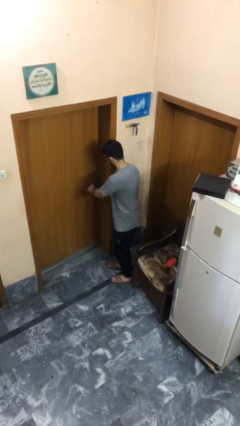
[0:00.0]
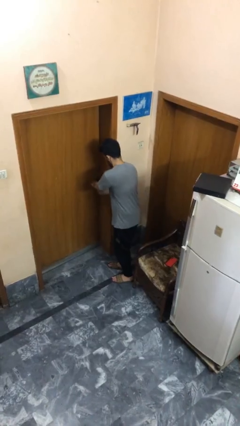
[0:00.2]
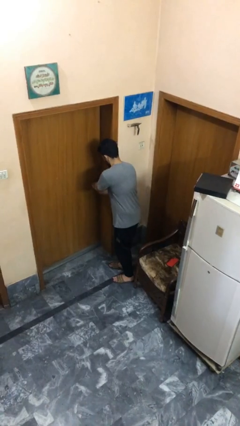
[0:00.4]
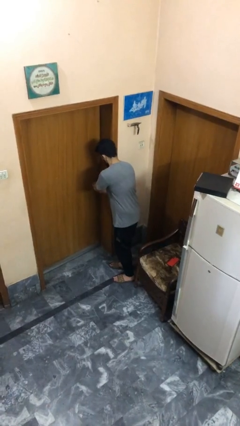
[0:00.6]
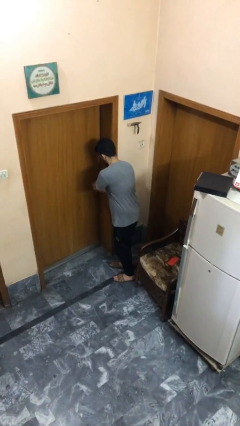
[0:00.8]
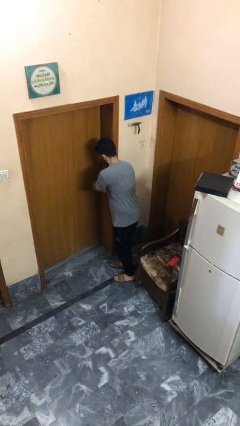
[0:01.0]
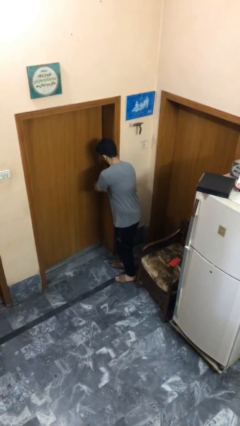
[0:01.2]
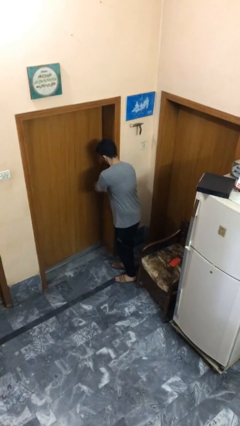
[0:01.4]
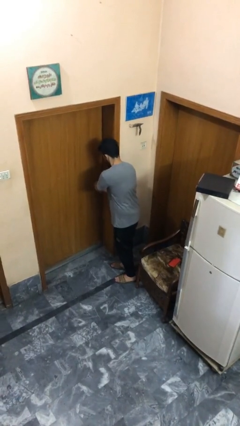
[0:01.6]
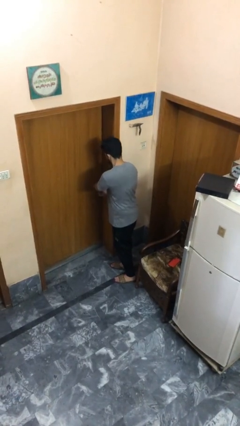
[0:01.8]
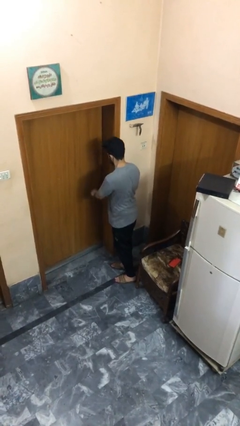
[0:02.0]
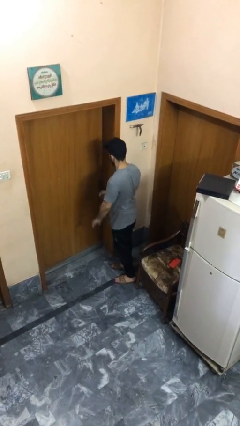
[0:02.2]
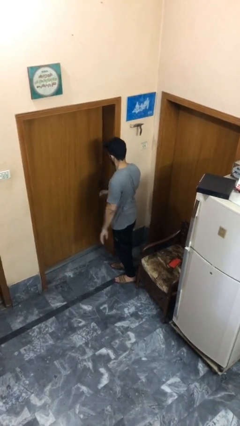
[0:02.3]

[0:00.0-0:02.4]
person unlocks door with keys

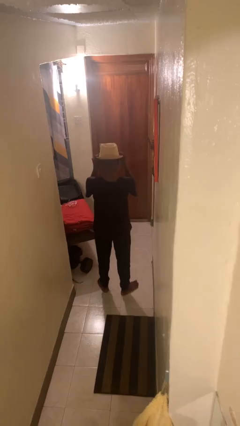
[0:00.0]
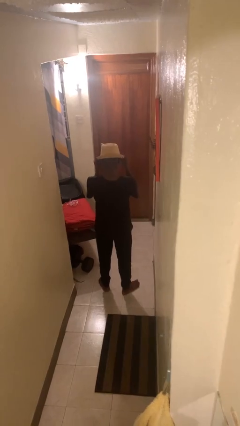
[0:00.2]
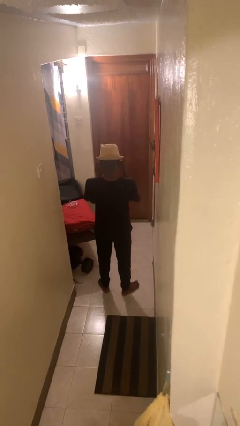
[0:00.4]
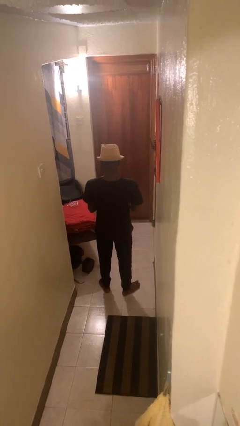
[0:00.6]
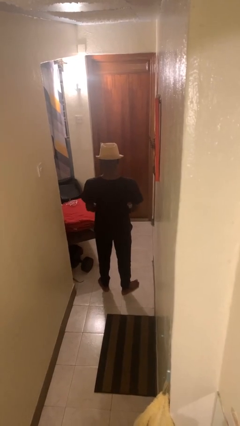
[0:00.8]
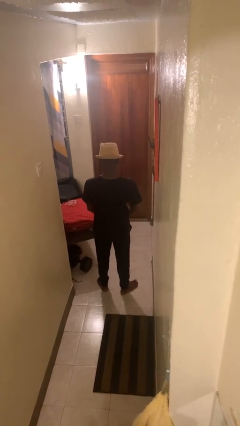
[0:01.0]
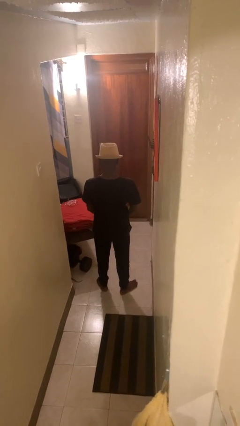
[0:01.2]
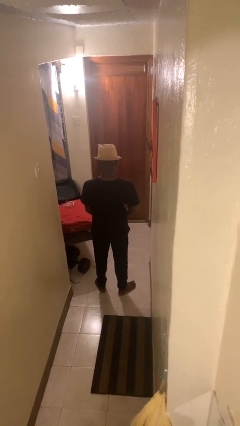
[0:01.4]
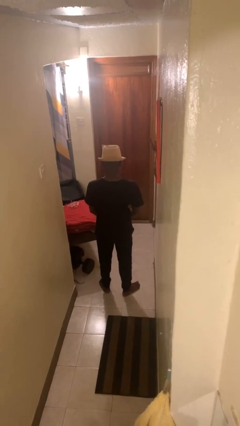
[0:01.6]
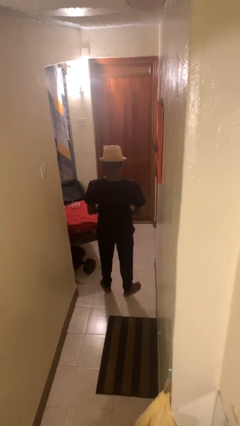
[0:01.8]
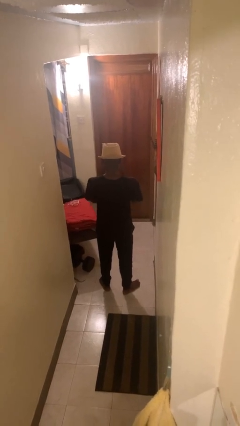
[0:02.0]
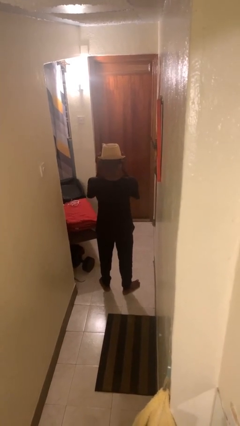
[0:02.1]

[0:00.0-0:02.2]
person puts on hat

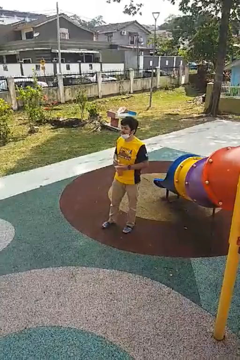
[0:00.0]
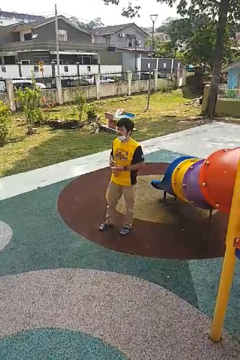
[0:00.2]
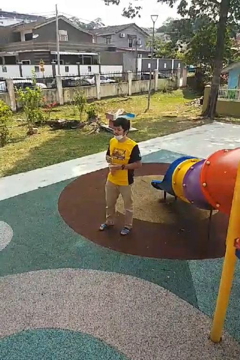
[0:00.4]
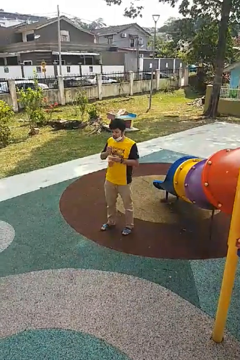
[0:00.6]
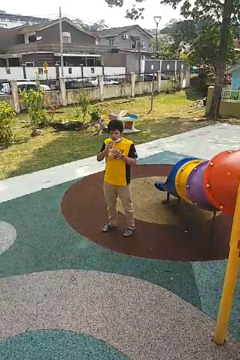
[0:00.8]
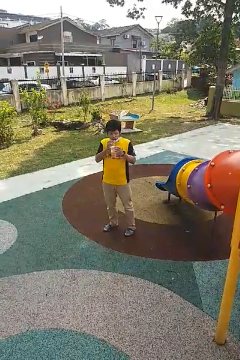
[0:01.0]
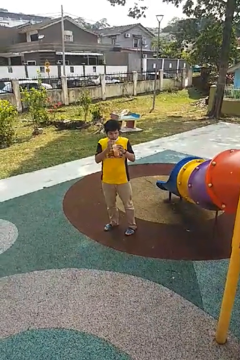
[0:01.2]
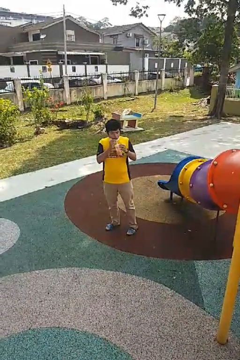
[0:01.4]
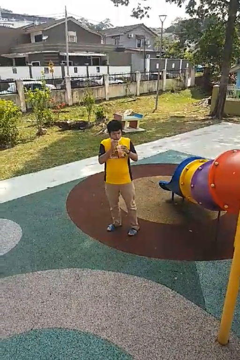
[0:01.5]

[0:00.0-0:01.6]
person drinks from straw

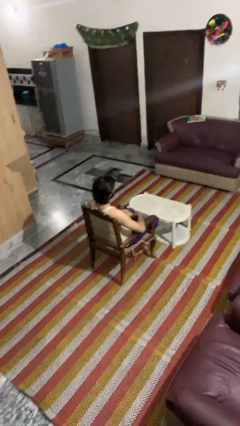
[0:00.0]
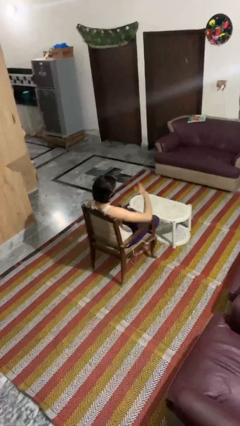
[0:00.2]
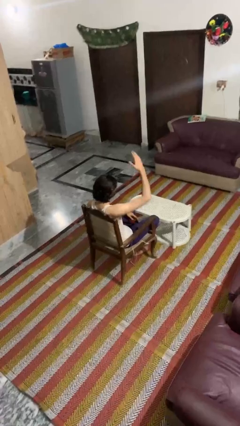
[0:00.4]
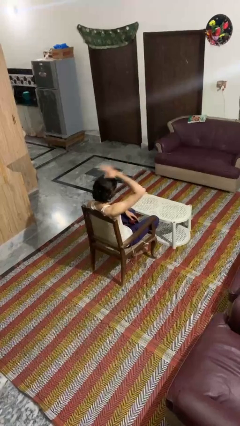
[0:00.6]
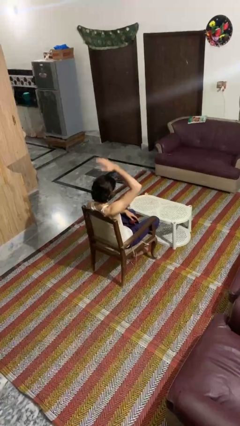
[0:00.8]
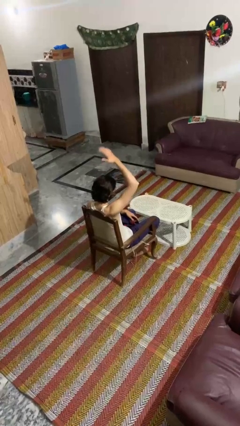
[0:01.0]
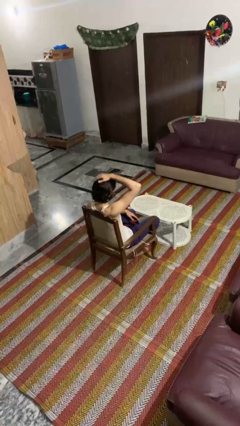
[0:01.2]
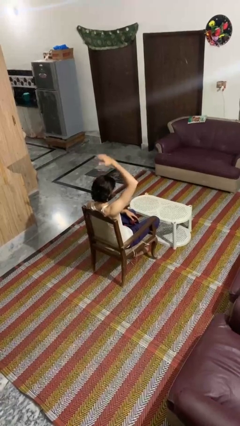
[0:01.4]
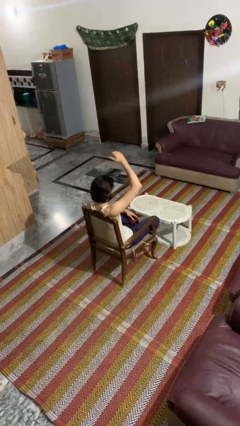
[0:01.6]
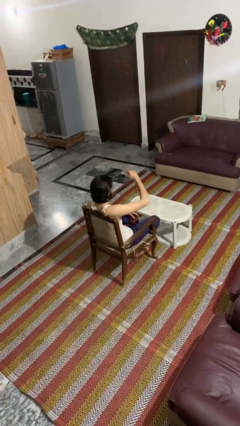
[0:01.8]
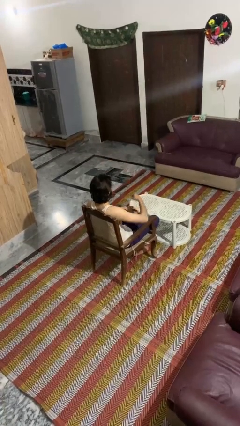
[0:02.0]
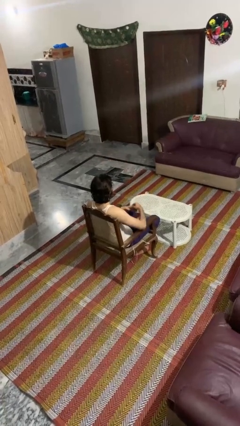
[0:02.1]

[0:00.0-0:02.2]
person pats head

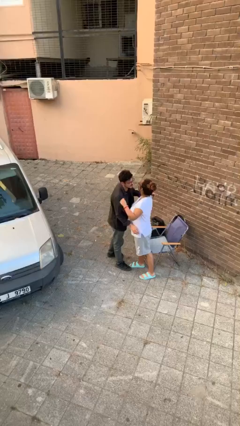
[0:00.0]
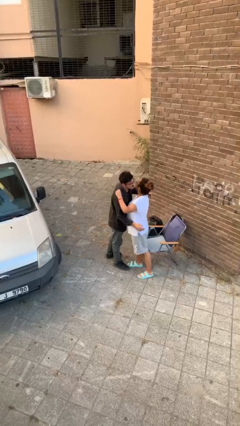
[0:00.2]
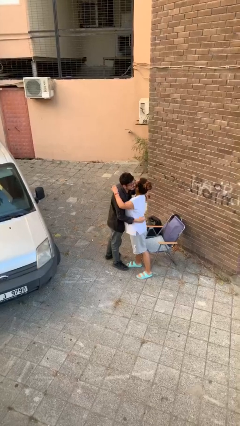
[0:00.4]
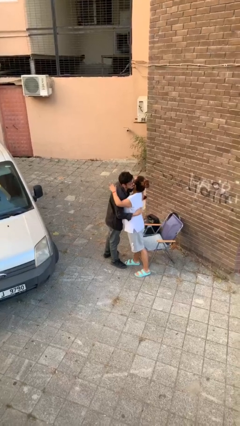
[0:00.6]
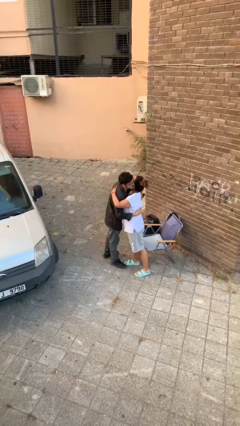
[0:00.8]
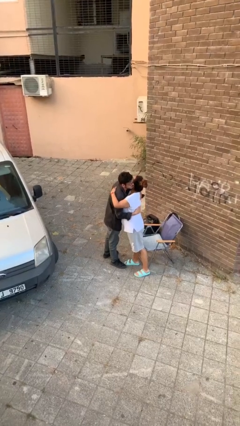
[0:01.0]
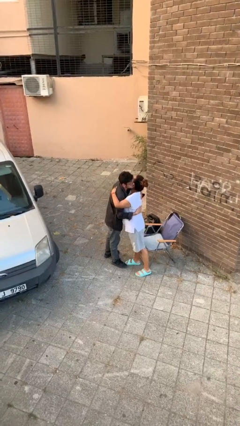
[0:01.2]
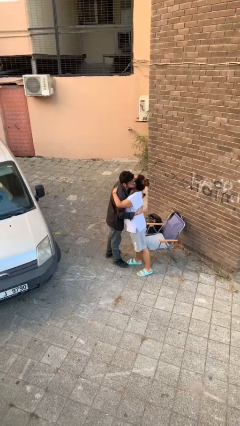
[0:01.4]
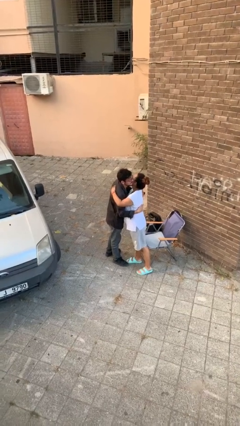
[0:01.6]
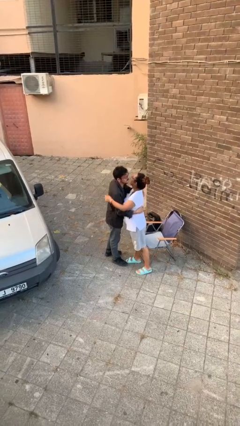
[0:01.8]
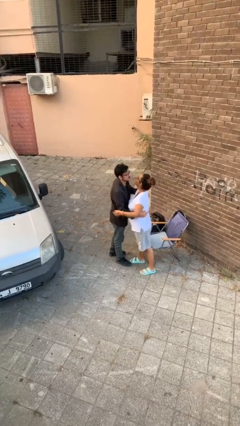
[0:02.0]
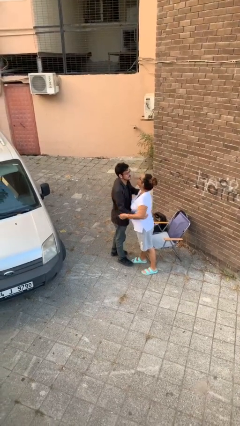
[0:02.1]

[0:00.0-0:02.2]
person embraces person

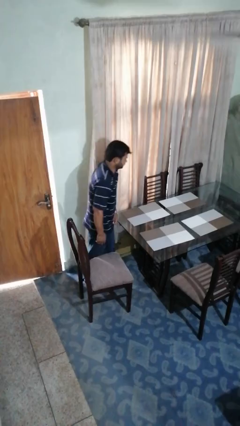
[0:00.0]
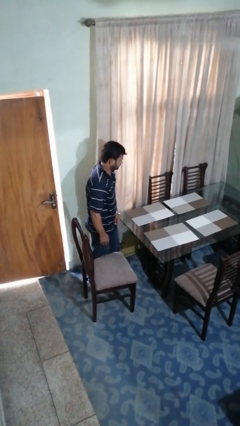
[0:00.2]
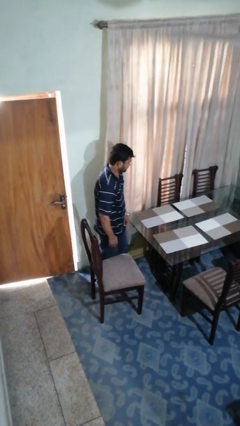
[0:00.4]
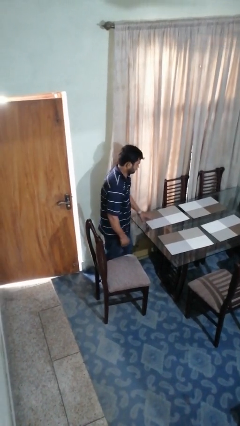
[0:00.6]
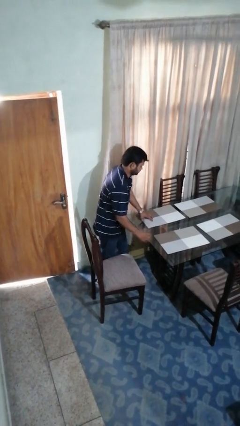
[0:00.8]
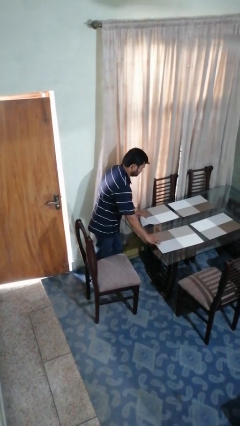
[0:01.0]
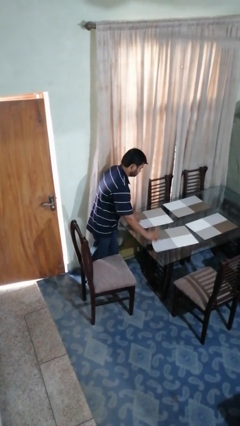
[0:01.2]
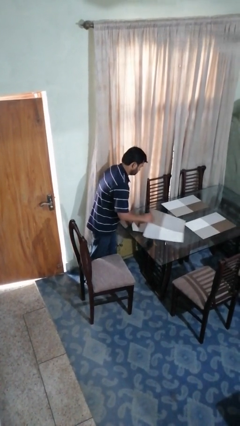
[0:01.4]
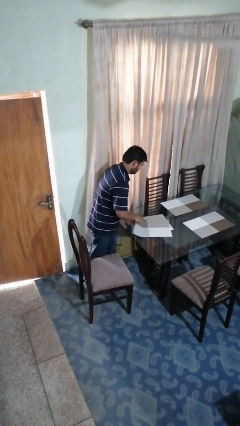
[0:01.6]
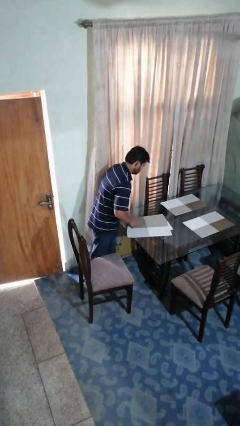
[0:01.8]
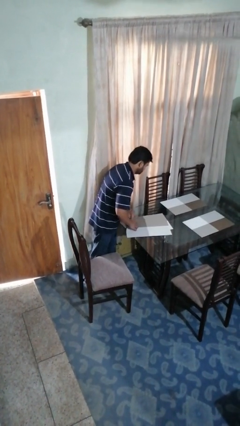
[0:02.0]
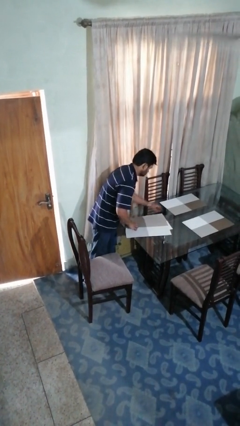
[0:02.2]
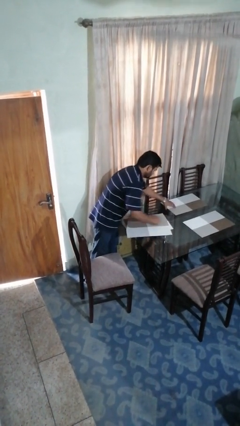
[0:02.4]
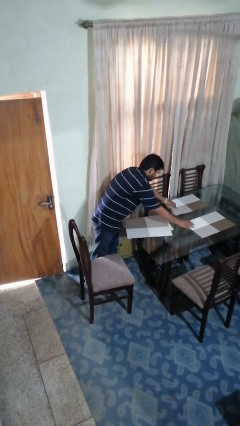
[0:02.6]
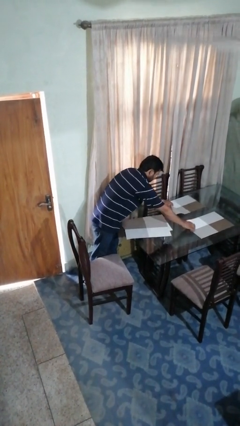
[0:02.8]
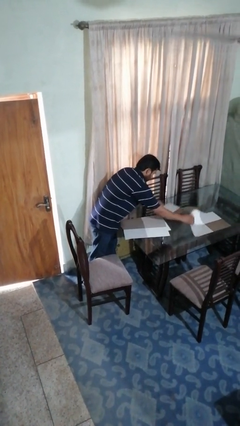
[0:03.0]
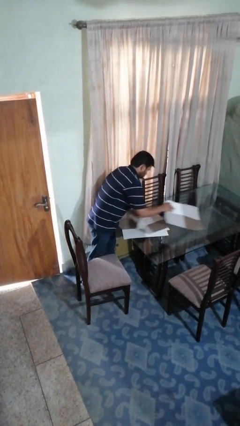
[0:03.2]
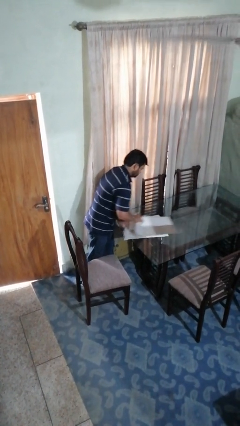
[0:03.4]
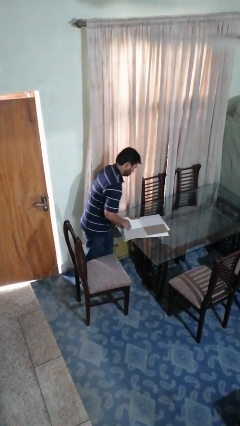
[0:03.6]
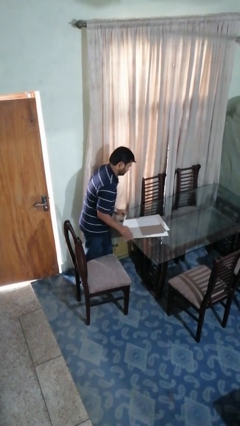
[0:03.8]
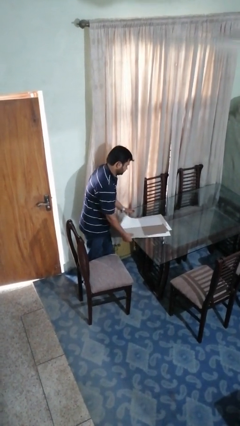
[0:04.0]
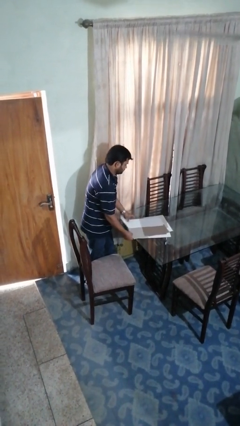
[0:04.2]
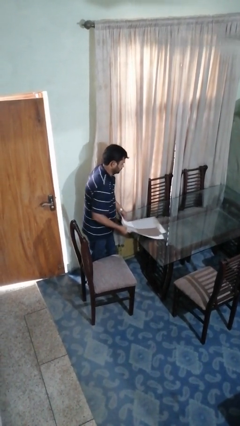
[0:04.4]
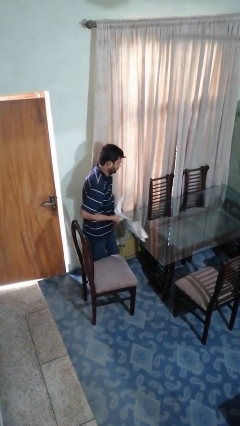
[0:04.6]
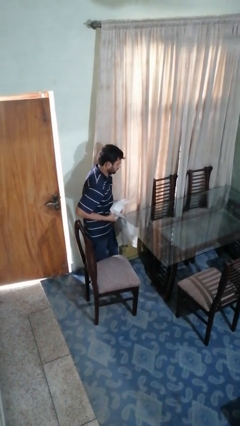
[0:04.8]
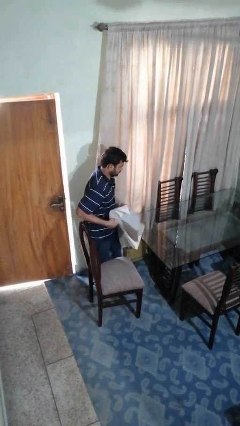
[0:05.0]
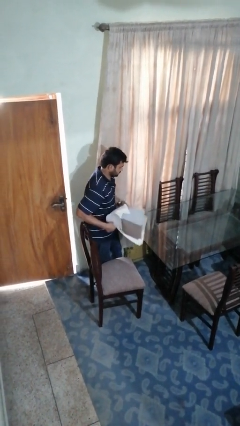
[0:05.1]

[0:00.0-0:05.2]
person folds tablecloth

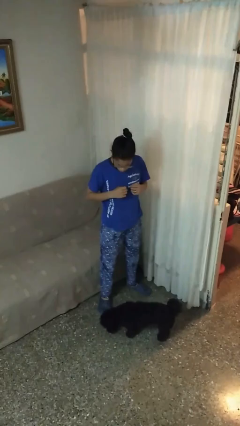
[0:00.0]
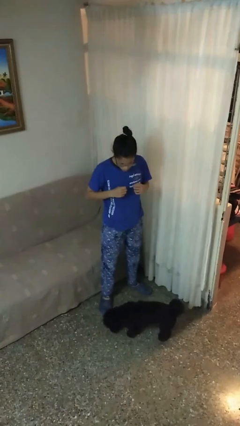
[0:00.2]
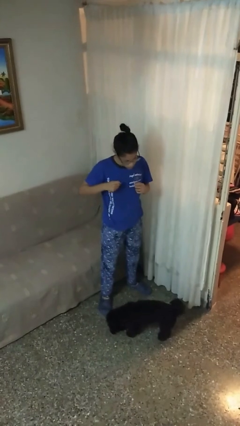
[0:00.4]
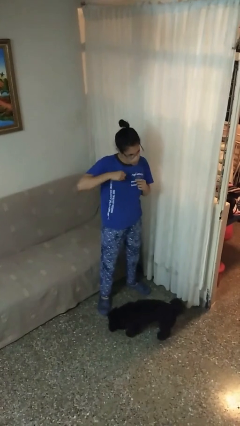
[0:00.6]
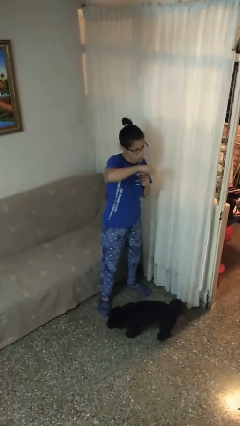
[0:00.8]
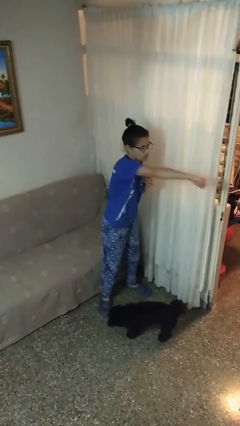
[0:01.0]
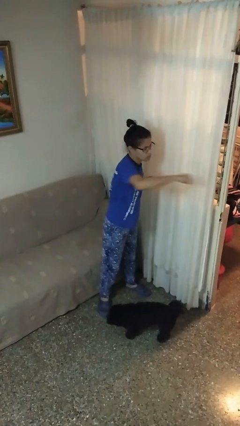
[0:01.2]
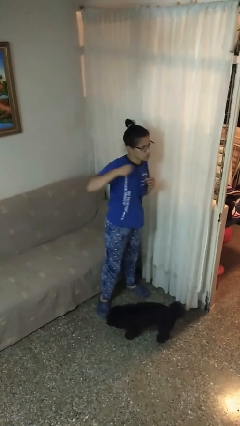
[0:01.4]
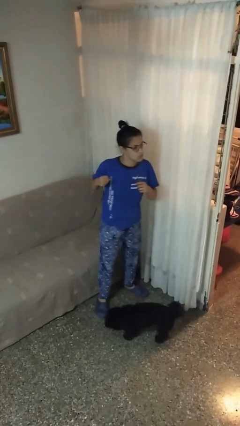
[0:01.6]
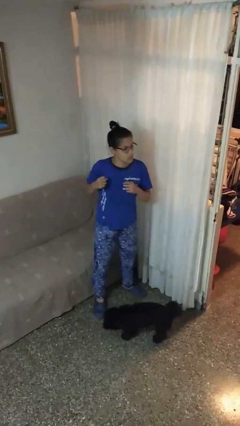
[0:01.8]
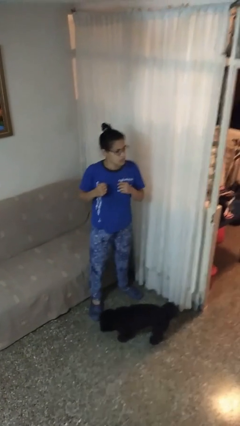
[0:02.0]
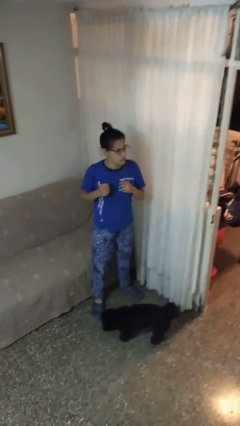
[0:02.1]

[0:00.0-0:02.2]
person punches
